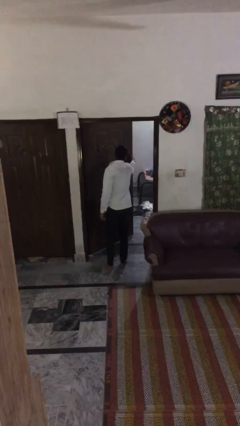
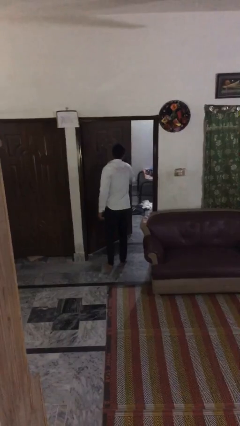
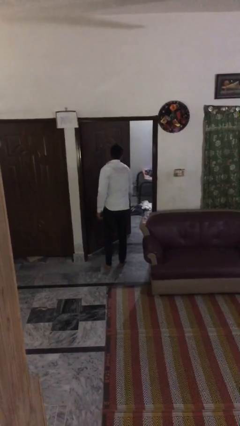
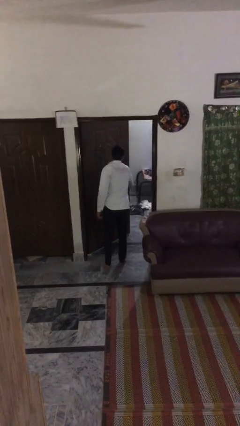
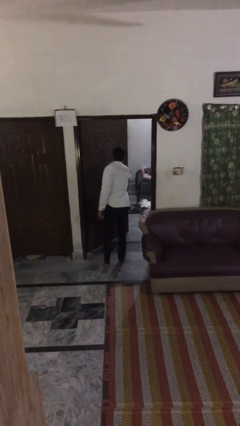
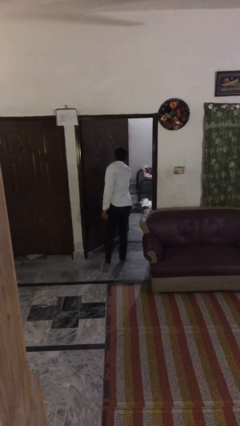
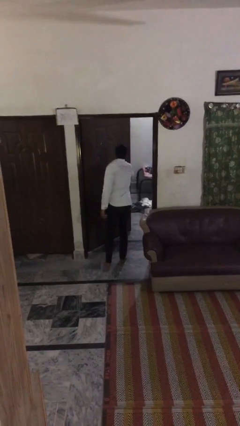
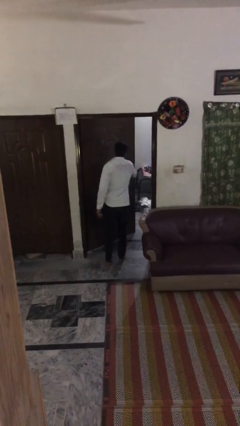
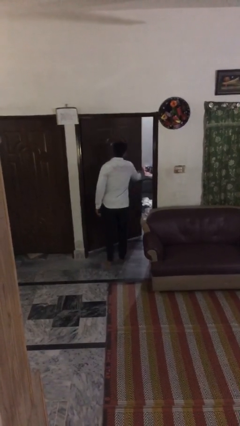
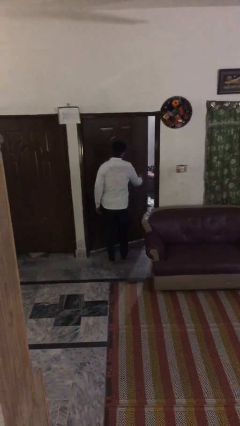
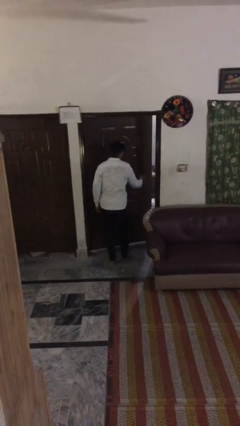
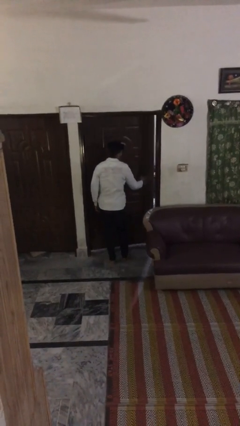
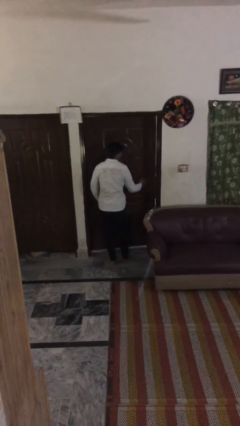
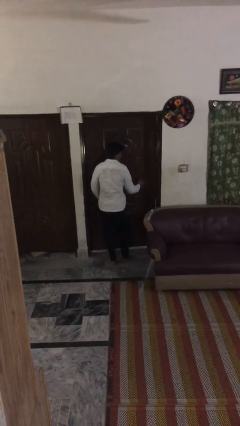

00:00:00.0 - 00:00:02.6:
person closes facility door

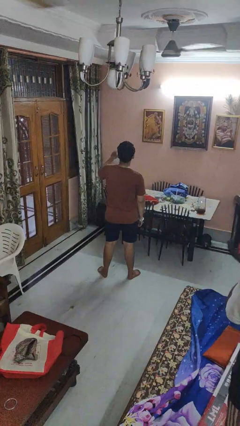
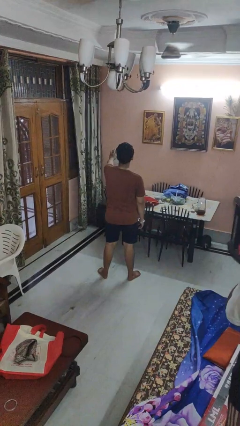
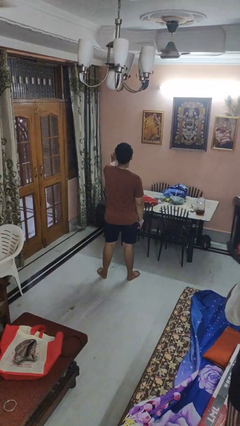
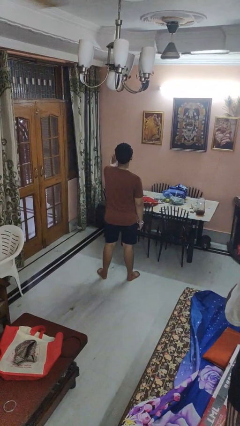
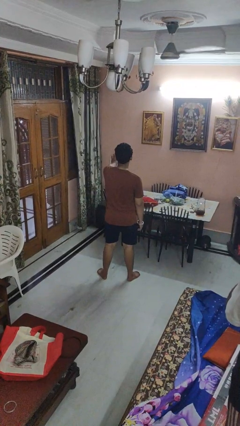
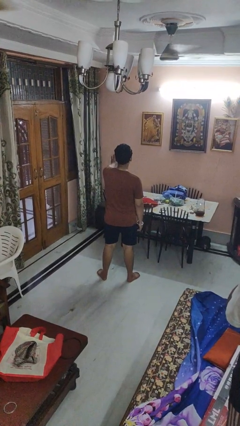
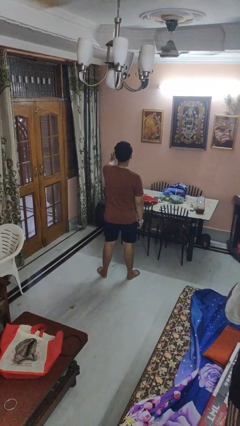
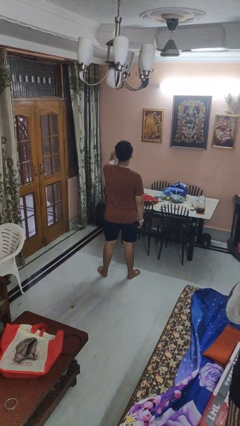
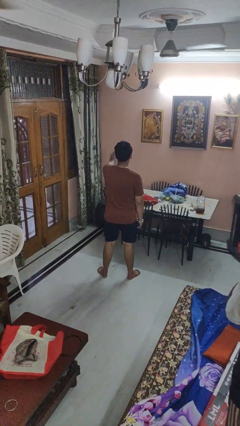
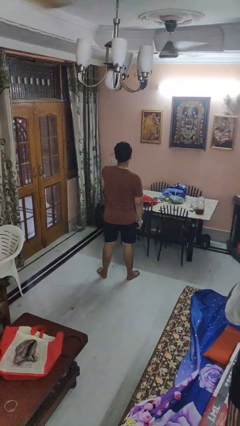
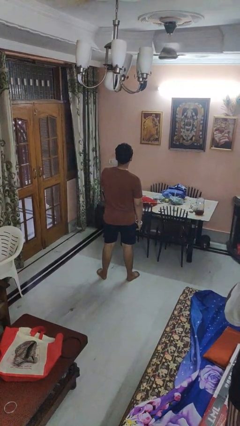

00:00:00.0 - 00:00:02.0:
person gestures stop

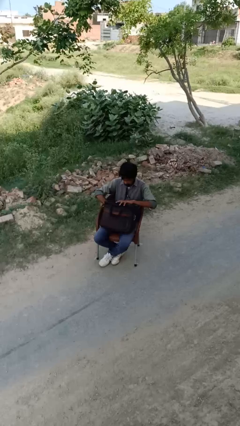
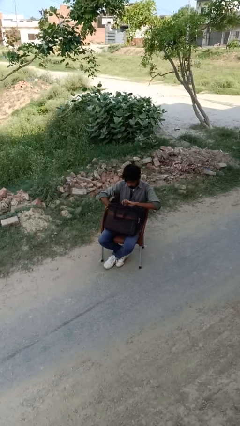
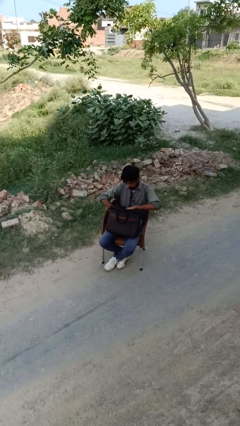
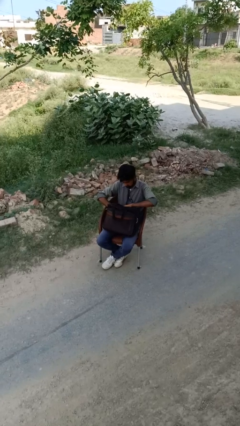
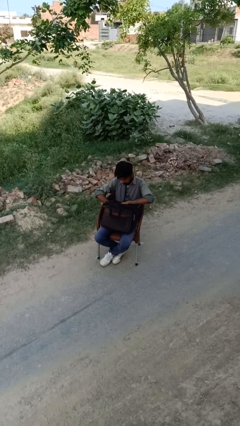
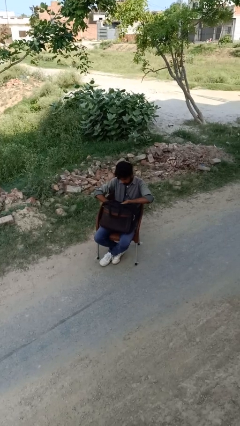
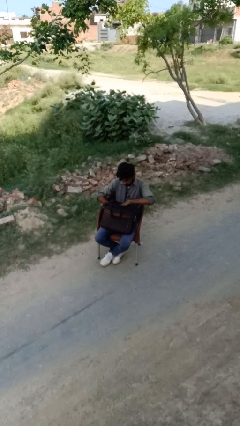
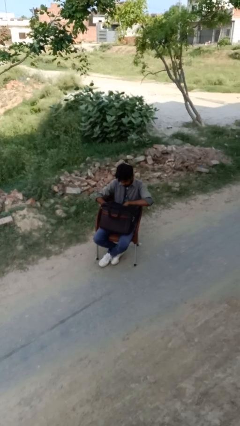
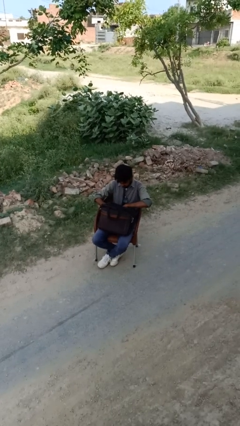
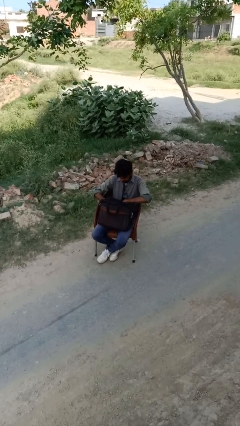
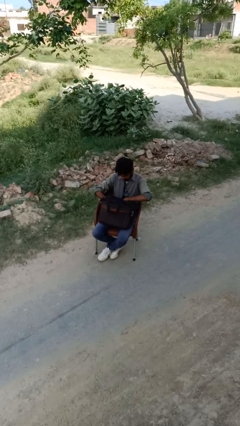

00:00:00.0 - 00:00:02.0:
person searches in backpack

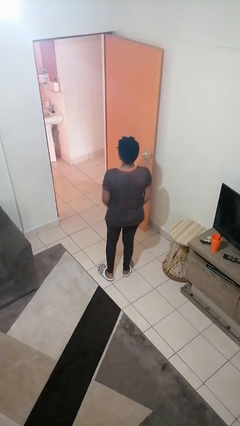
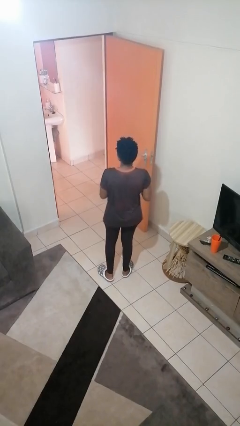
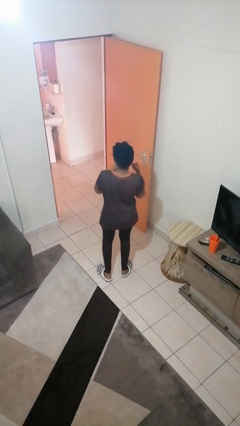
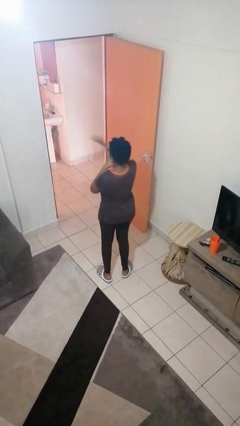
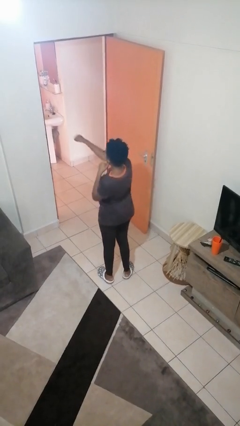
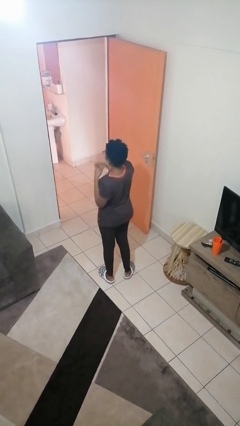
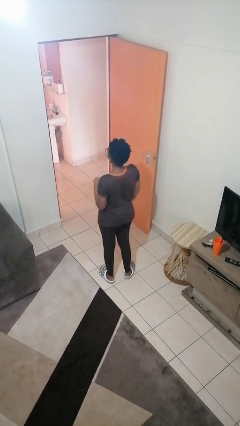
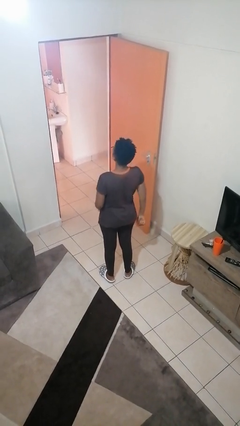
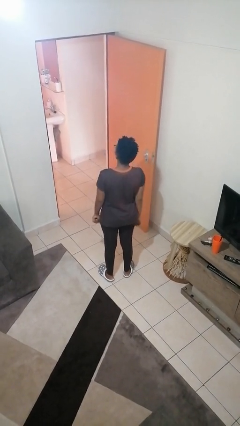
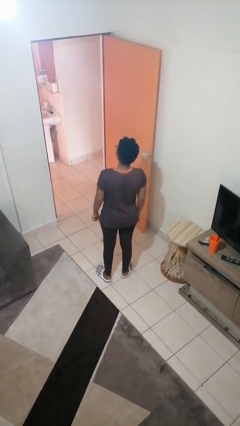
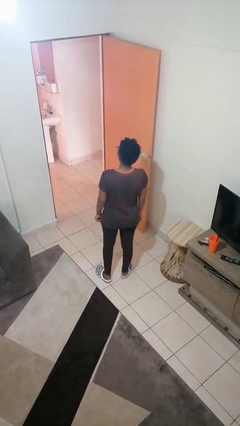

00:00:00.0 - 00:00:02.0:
person punches

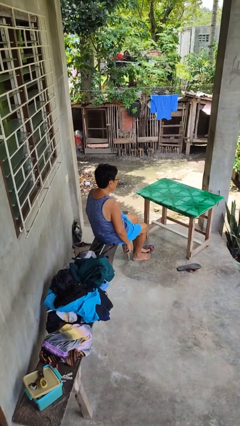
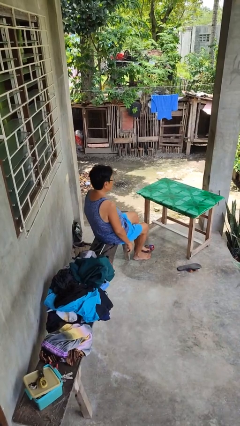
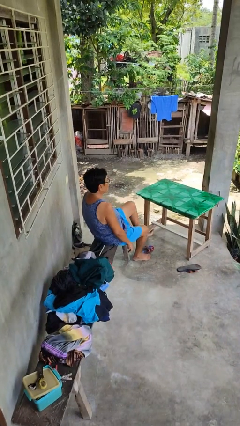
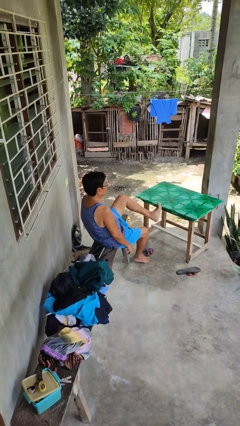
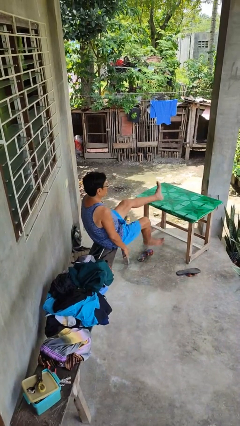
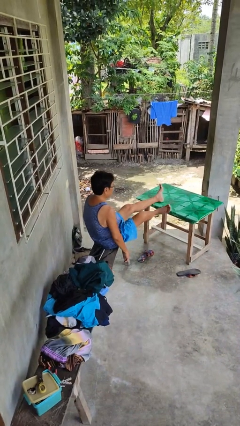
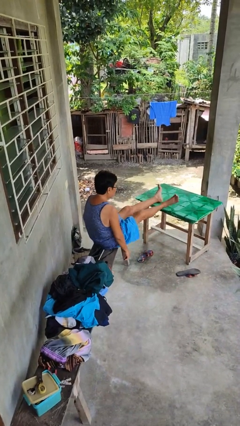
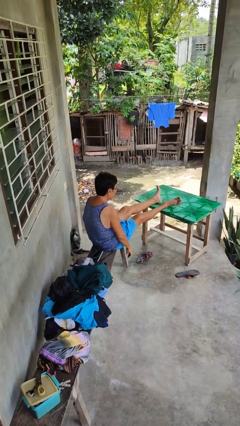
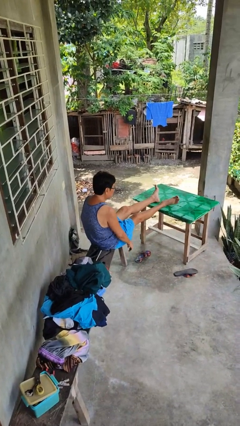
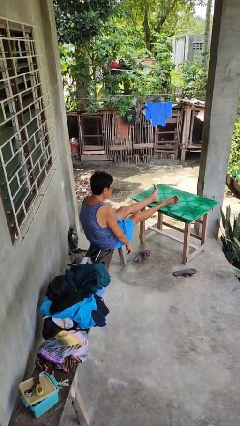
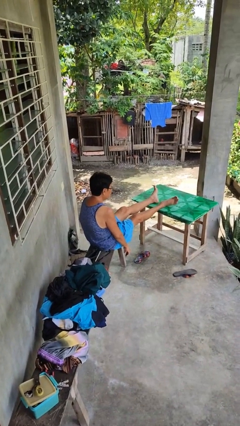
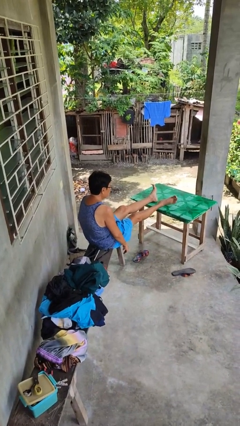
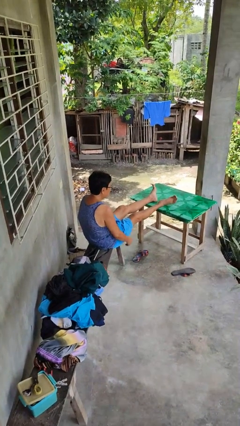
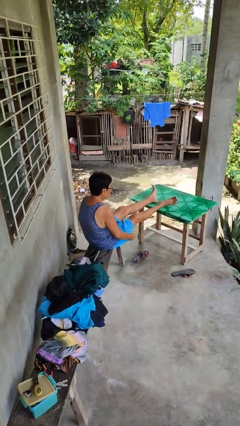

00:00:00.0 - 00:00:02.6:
person puts feet up

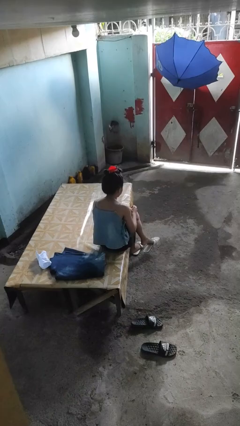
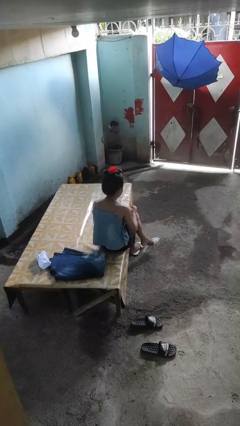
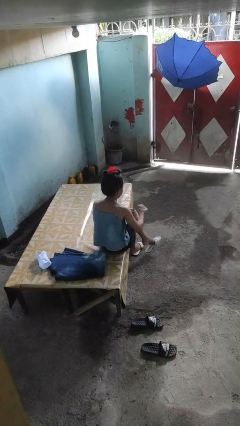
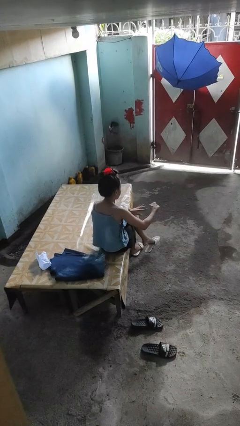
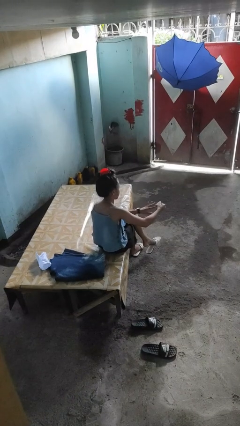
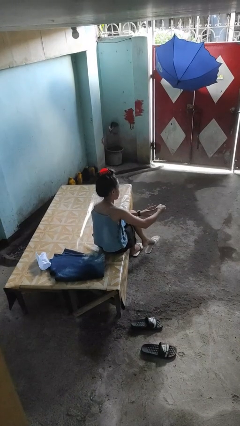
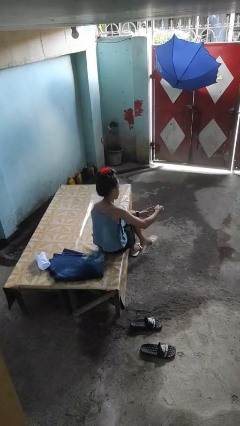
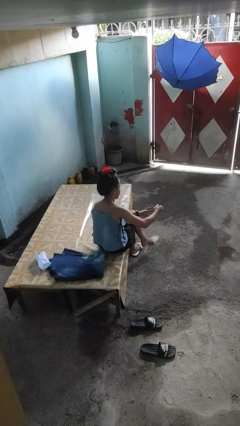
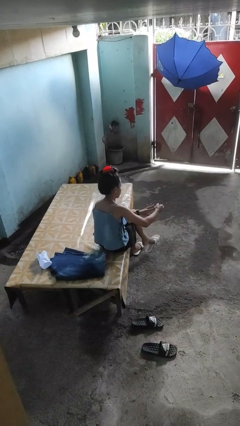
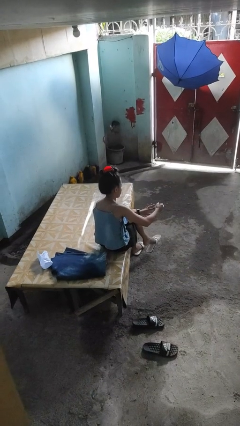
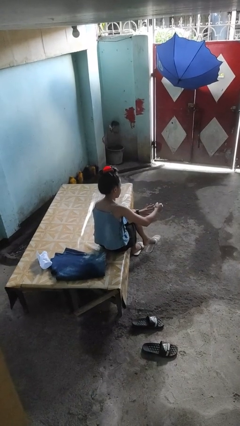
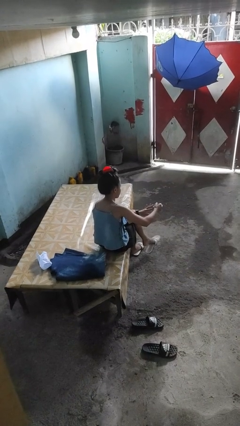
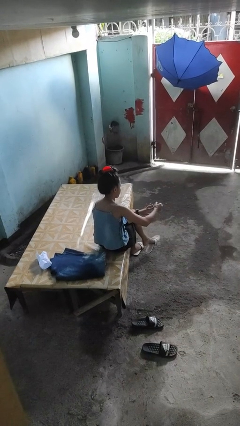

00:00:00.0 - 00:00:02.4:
person clips fingernails

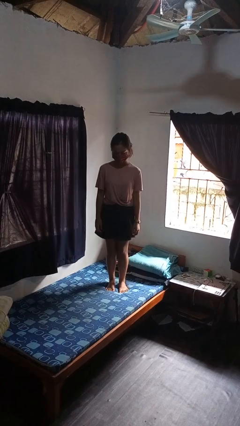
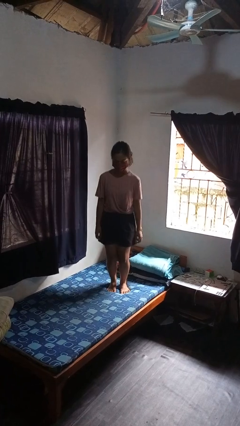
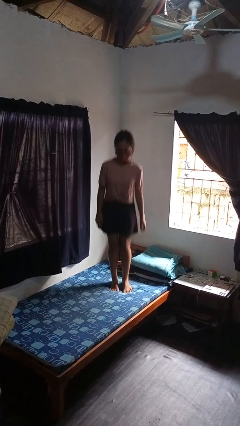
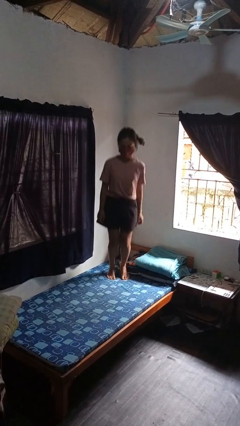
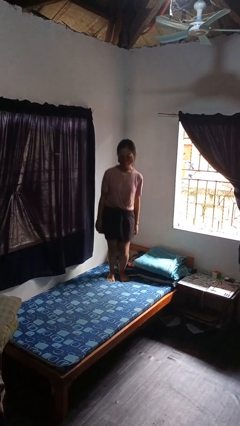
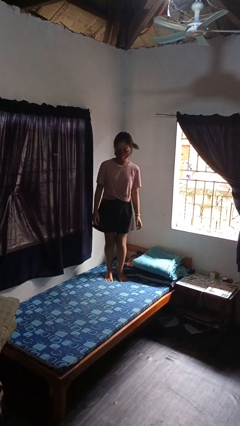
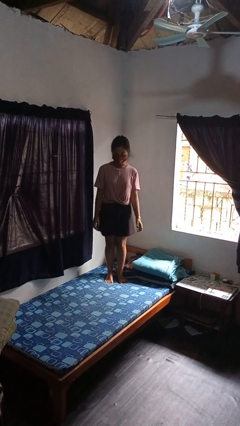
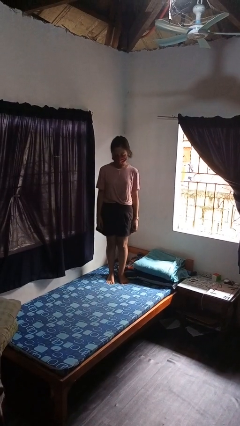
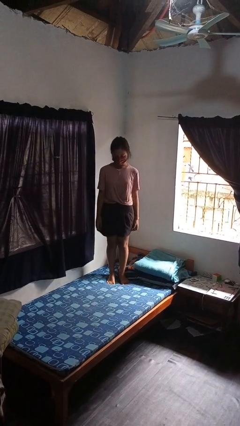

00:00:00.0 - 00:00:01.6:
person jumps on bed

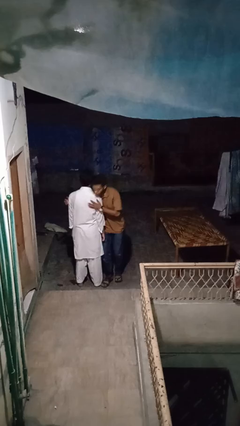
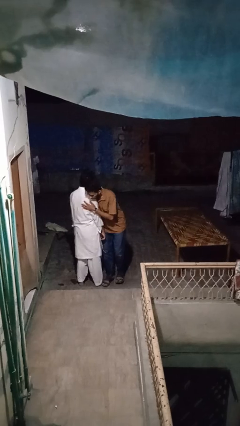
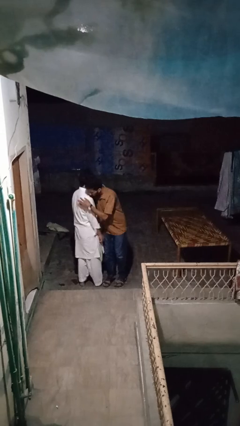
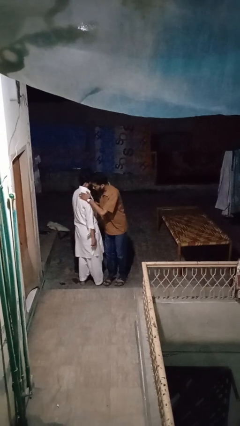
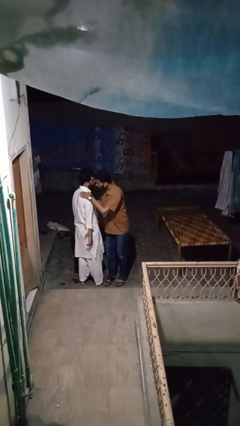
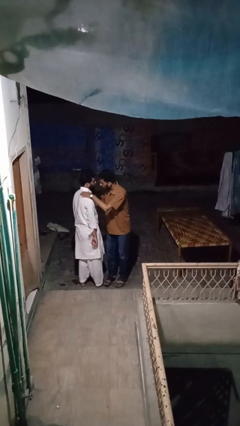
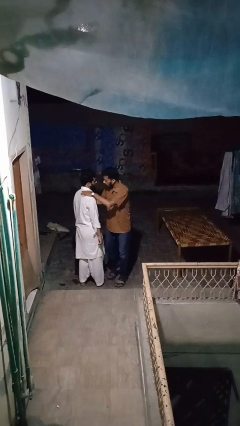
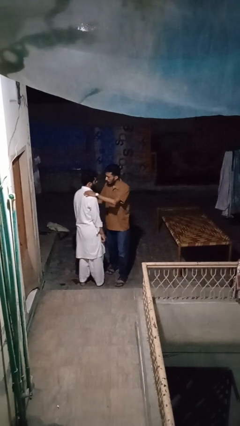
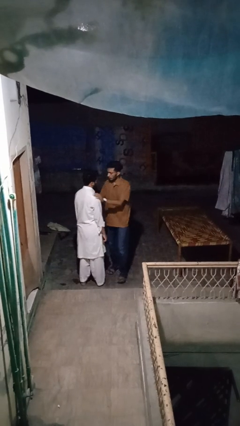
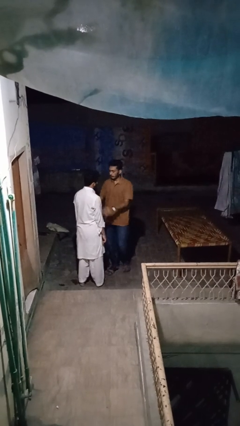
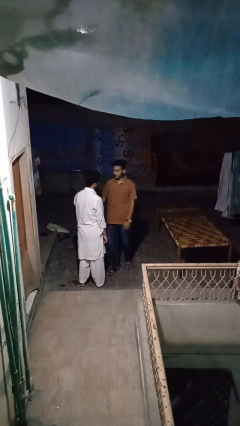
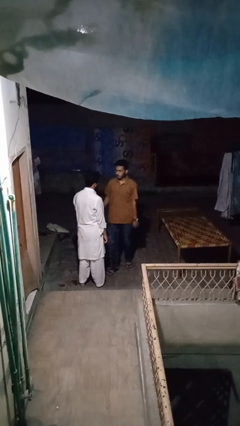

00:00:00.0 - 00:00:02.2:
person bumps into person
